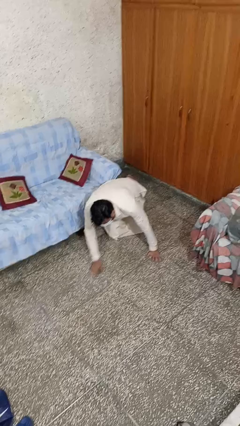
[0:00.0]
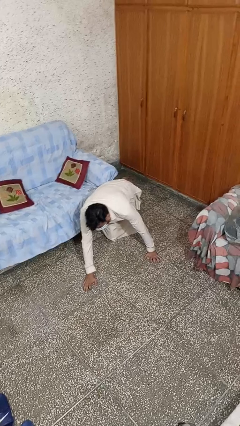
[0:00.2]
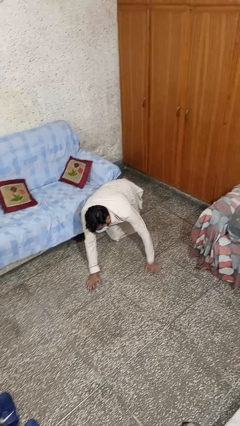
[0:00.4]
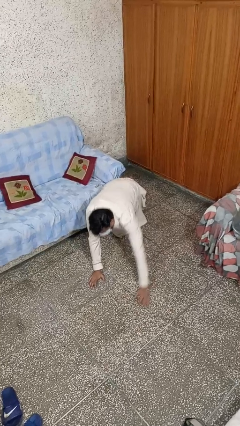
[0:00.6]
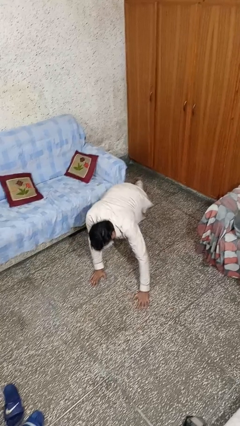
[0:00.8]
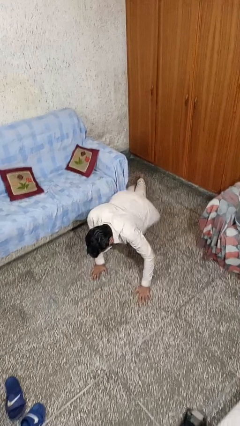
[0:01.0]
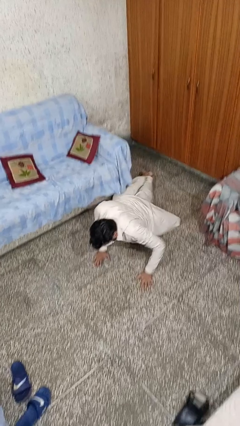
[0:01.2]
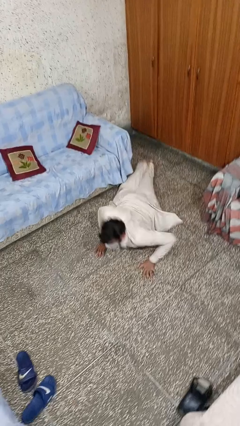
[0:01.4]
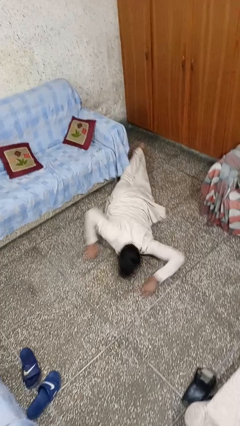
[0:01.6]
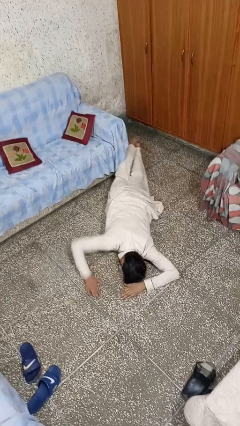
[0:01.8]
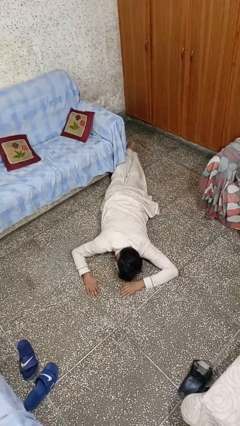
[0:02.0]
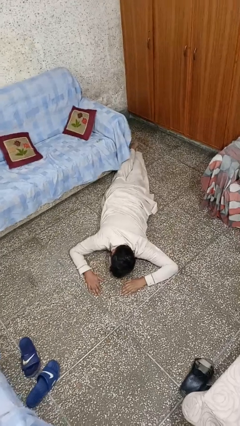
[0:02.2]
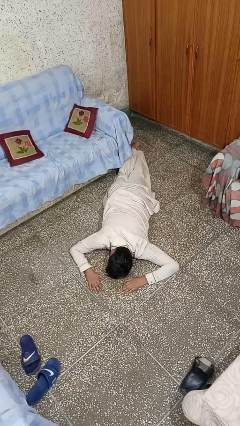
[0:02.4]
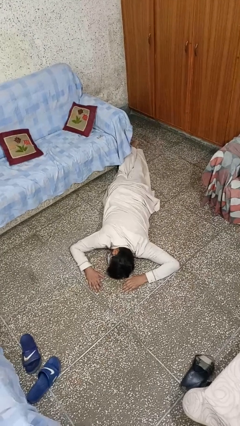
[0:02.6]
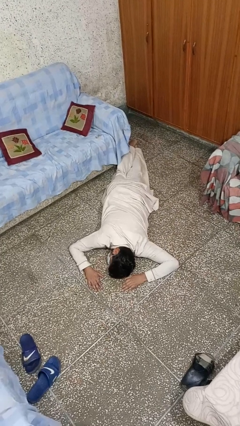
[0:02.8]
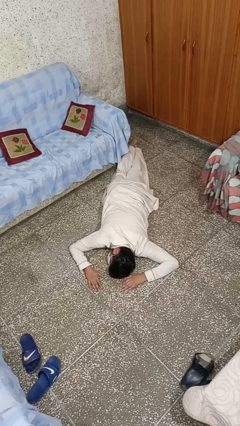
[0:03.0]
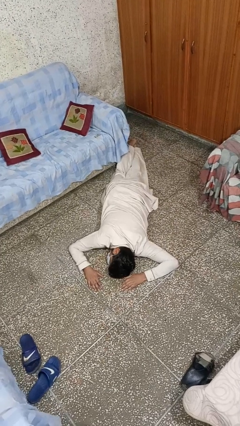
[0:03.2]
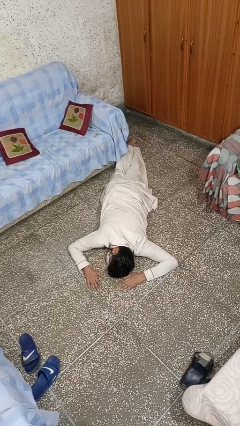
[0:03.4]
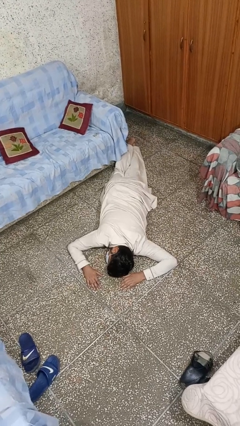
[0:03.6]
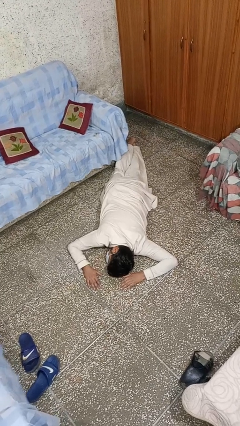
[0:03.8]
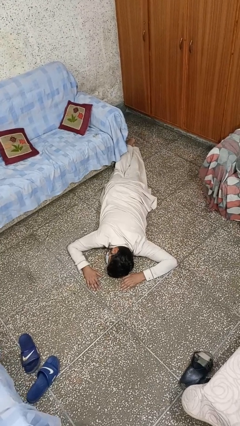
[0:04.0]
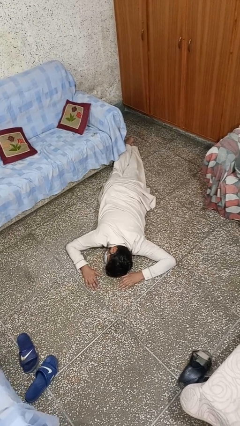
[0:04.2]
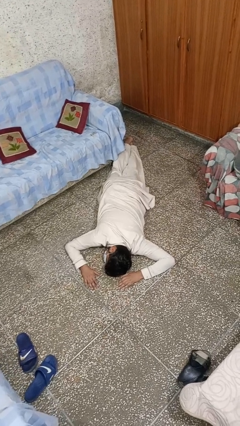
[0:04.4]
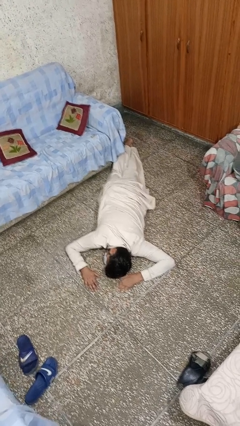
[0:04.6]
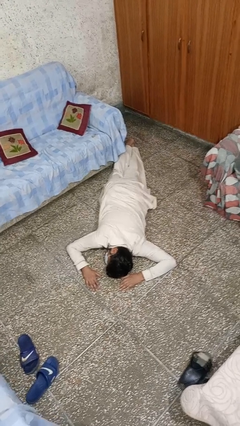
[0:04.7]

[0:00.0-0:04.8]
person lies down on floor

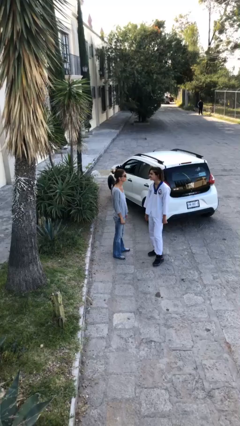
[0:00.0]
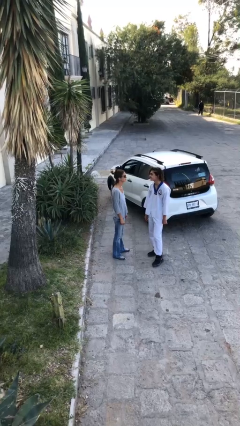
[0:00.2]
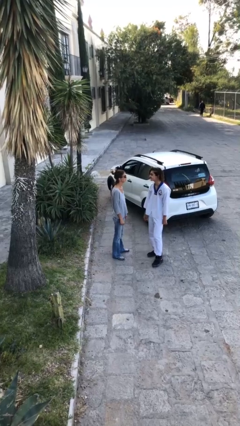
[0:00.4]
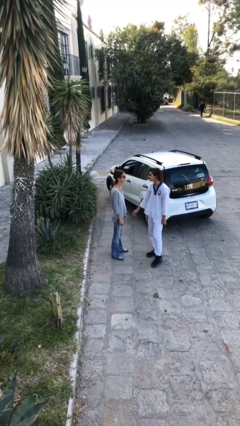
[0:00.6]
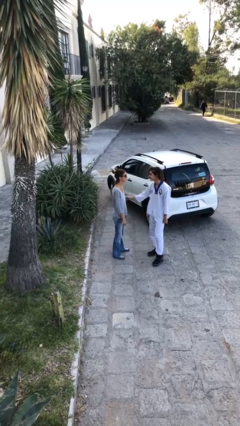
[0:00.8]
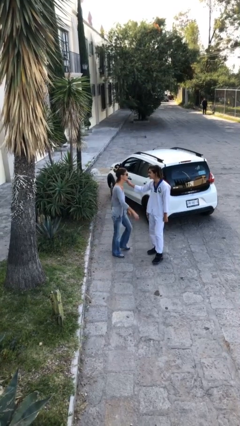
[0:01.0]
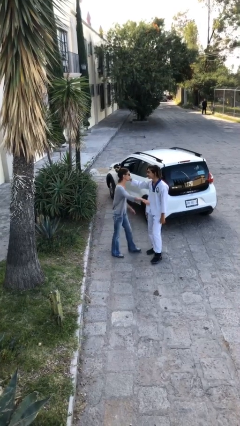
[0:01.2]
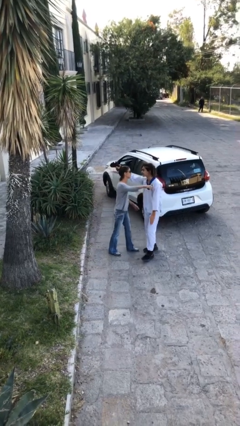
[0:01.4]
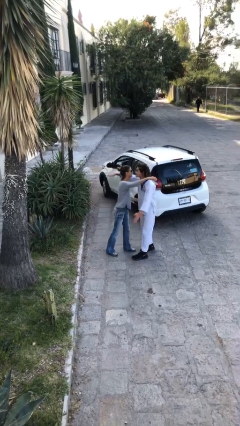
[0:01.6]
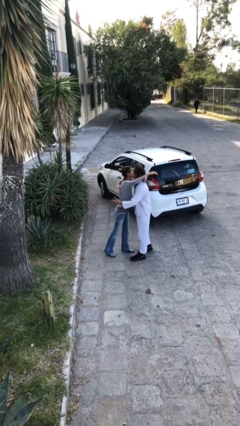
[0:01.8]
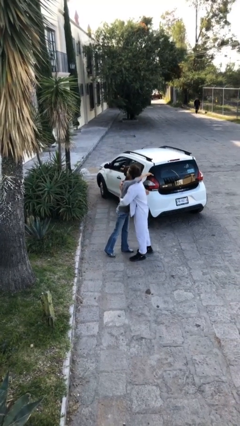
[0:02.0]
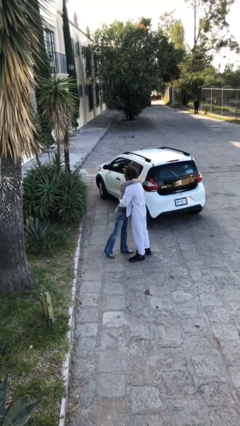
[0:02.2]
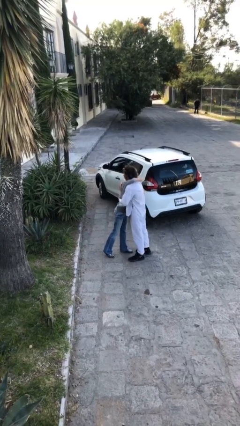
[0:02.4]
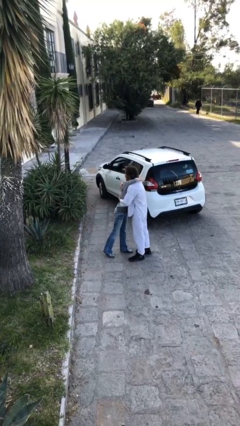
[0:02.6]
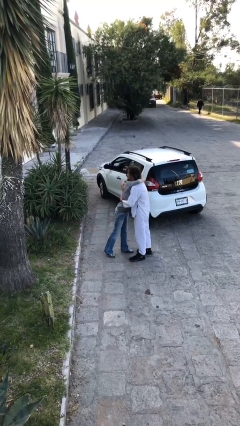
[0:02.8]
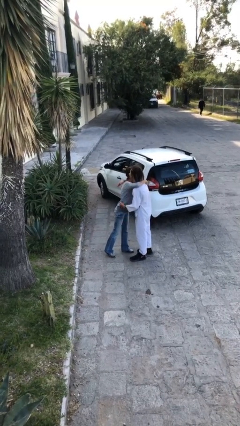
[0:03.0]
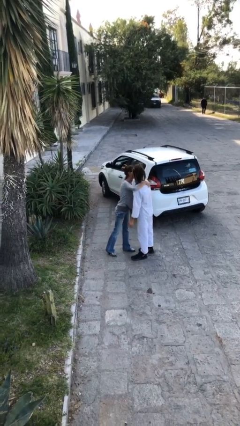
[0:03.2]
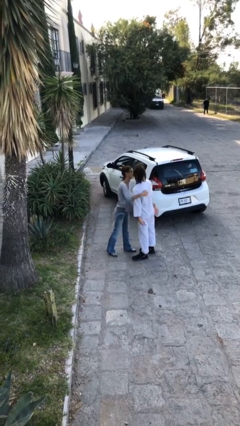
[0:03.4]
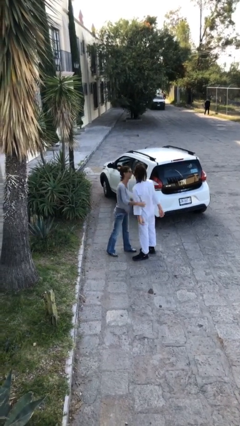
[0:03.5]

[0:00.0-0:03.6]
person embraces person

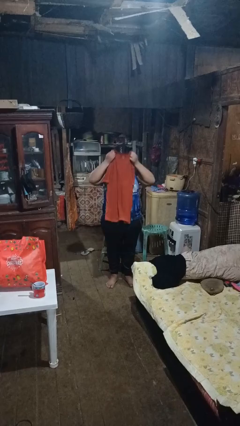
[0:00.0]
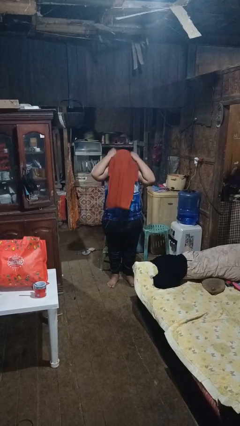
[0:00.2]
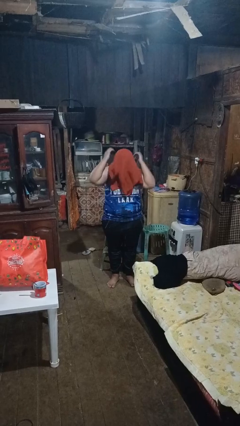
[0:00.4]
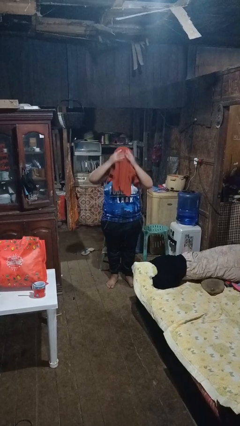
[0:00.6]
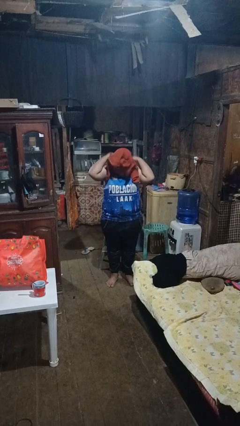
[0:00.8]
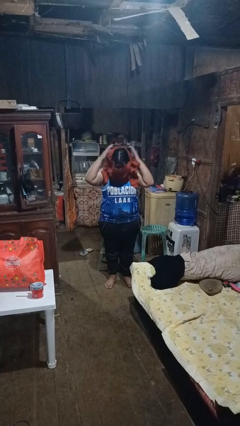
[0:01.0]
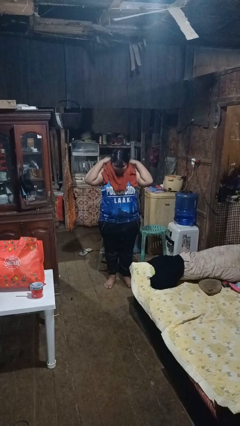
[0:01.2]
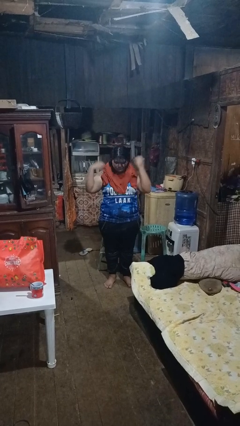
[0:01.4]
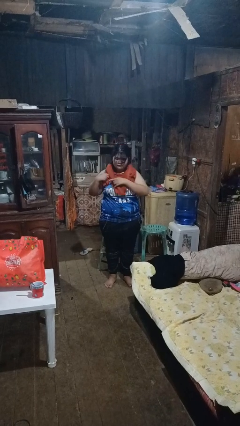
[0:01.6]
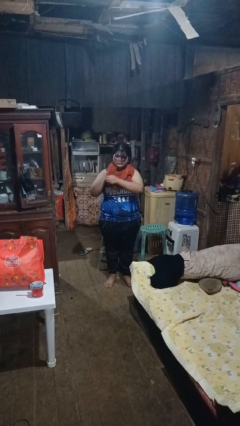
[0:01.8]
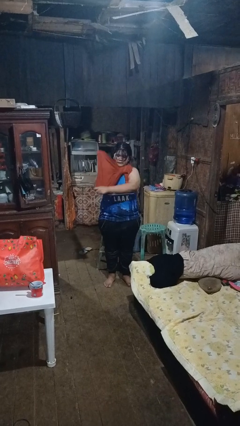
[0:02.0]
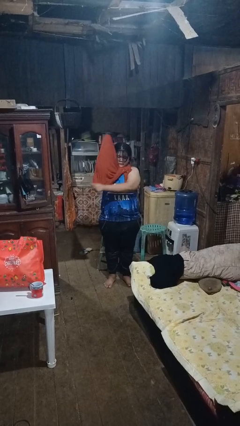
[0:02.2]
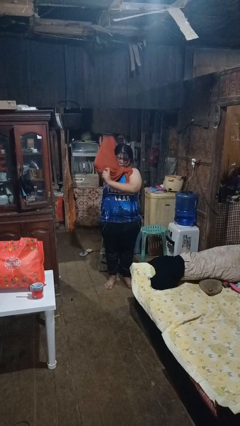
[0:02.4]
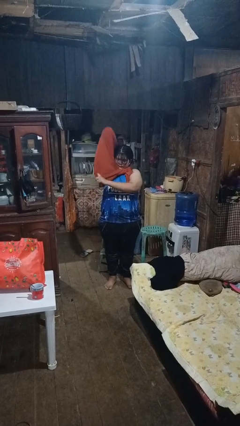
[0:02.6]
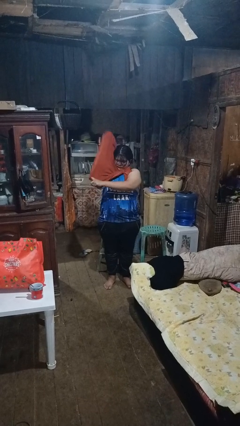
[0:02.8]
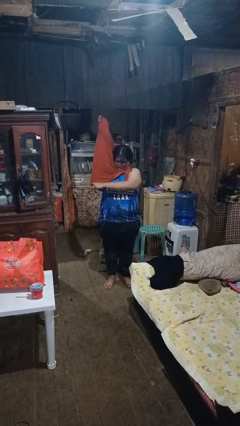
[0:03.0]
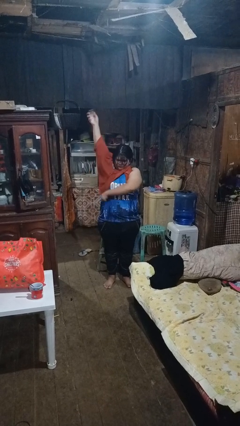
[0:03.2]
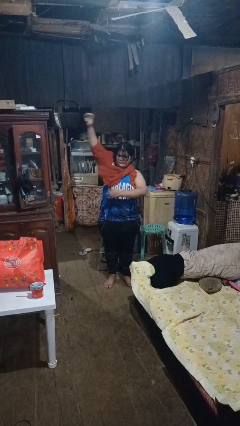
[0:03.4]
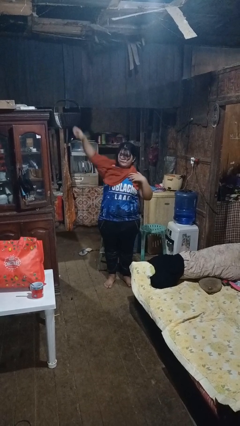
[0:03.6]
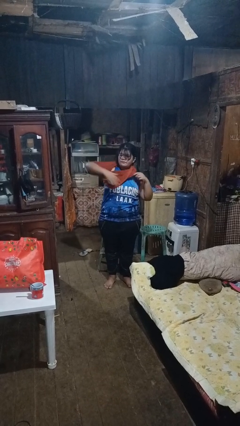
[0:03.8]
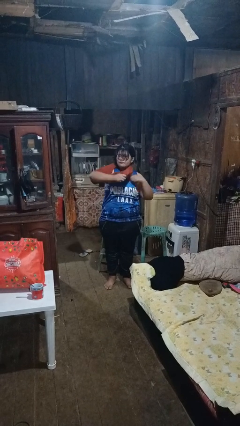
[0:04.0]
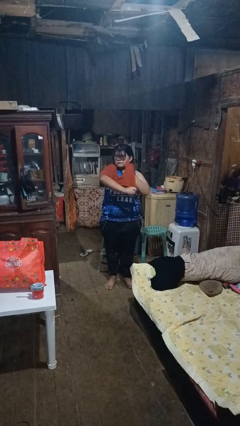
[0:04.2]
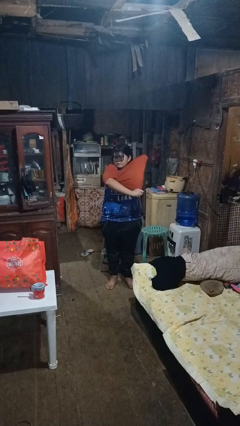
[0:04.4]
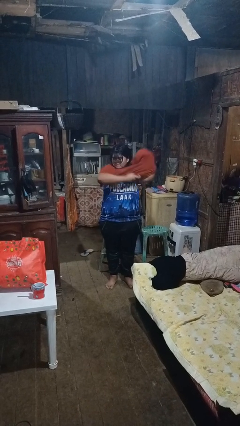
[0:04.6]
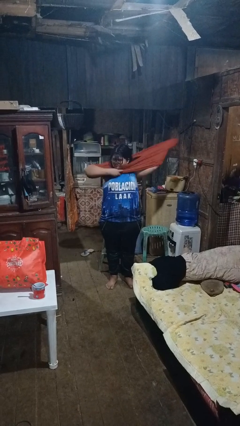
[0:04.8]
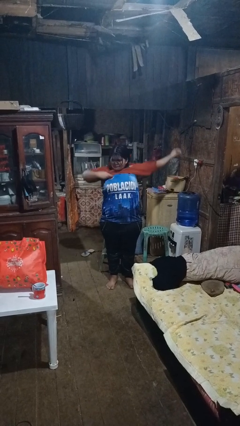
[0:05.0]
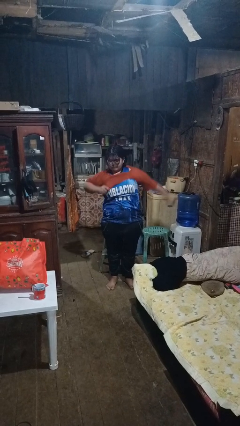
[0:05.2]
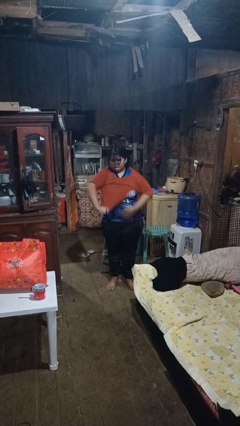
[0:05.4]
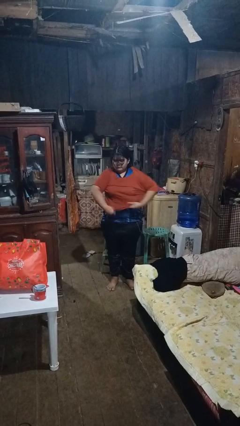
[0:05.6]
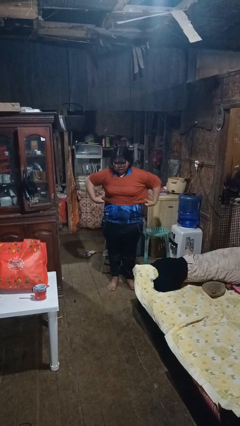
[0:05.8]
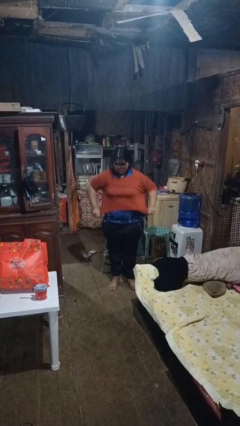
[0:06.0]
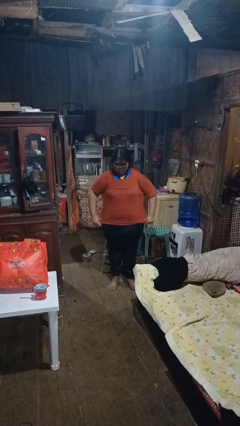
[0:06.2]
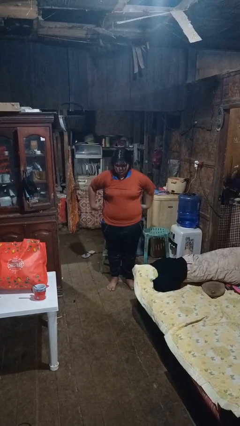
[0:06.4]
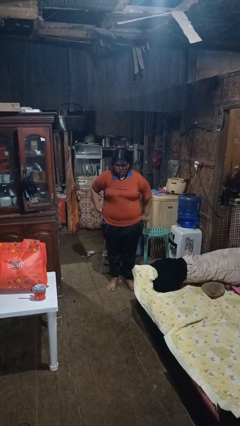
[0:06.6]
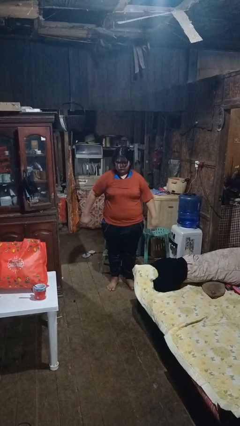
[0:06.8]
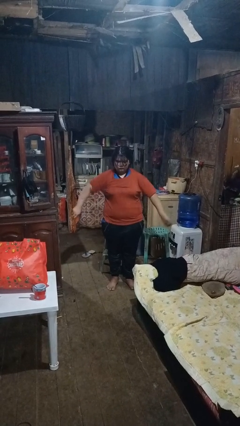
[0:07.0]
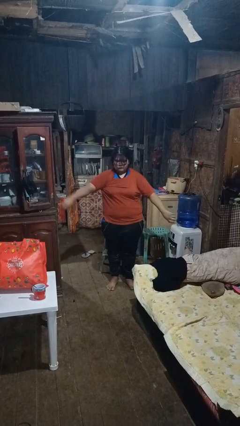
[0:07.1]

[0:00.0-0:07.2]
person puts on shirt

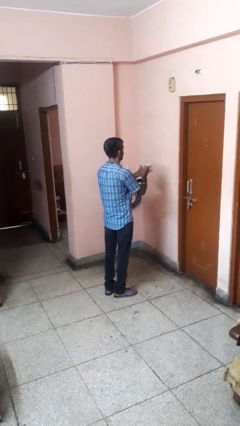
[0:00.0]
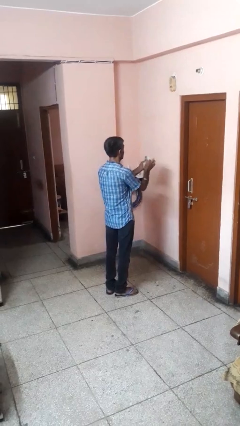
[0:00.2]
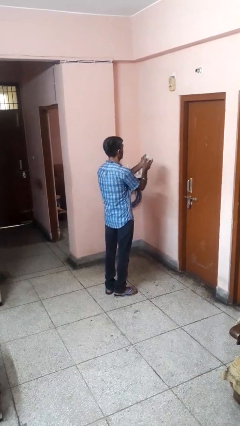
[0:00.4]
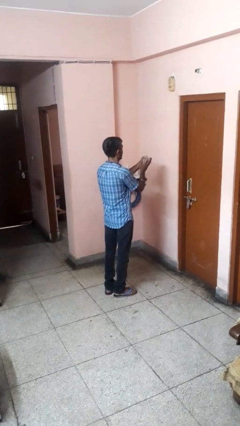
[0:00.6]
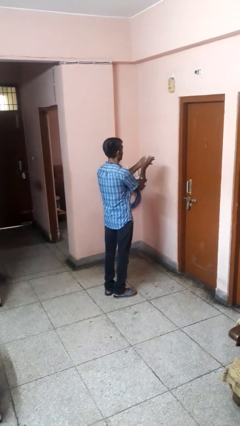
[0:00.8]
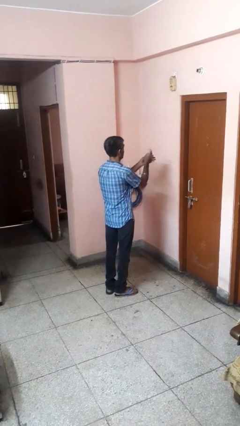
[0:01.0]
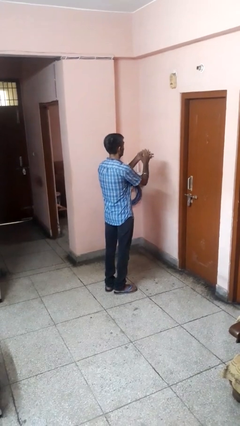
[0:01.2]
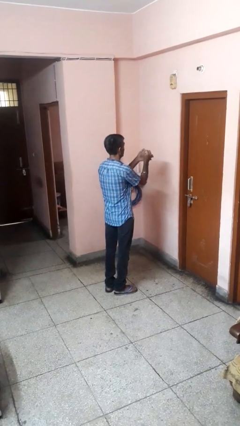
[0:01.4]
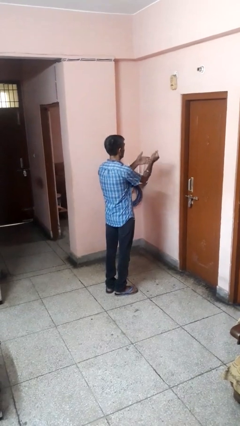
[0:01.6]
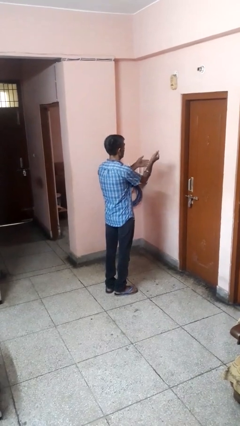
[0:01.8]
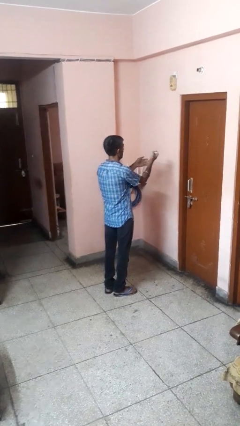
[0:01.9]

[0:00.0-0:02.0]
person crumples paper
